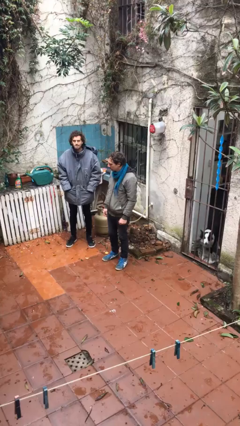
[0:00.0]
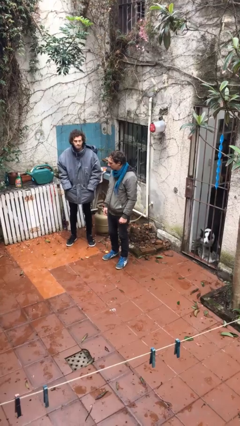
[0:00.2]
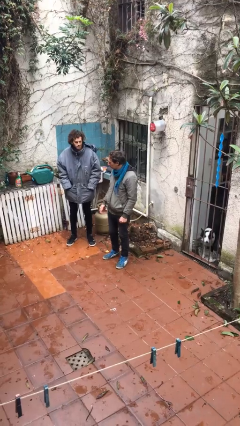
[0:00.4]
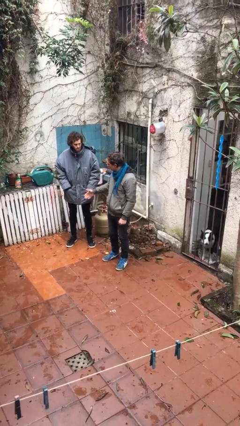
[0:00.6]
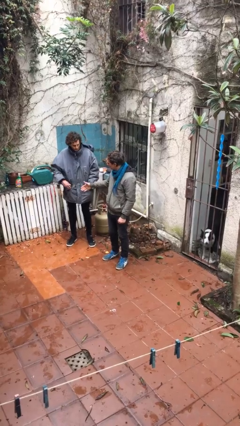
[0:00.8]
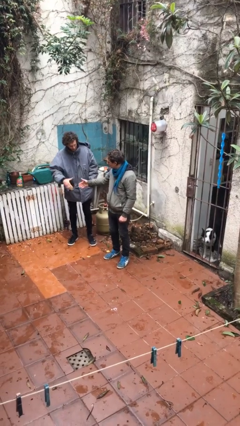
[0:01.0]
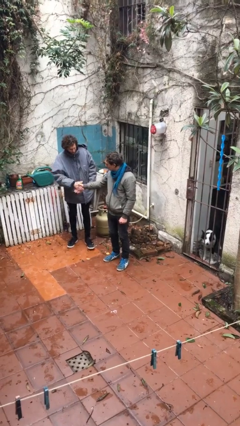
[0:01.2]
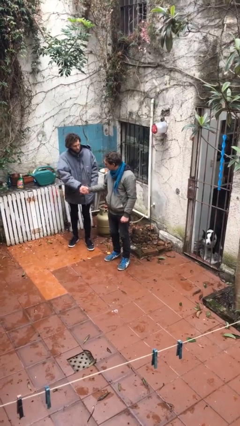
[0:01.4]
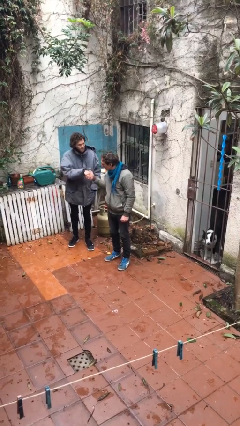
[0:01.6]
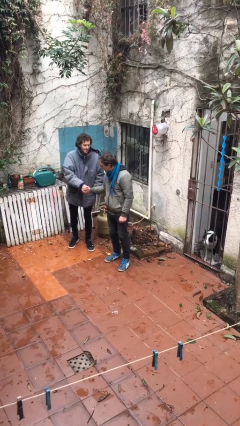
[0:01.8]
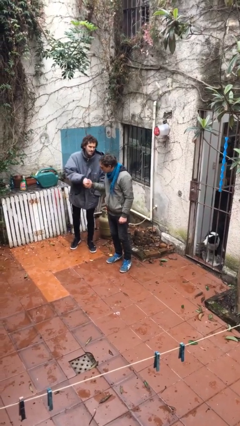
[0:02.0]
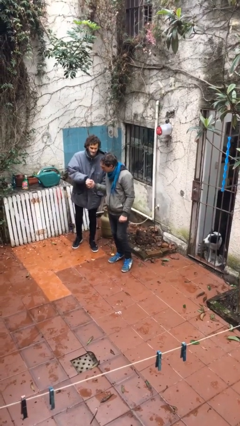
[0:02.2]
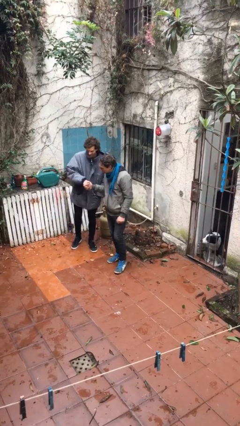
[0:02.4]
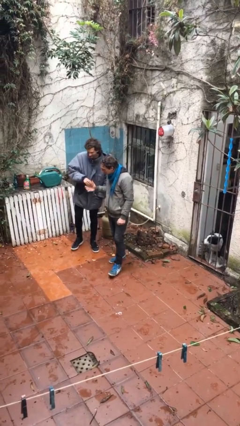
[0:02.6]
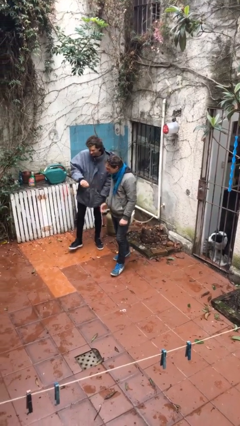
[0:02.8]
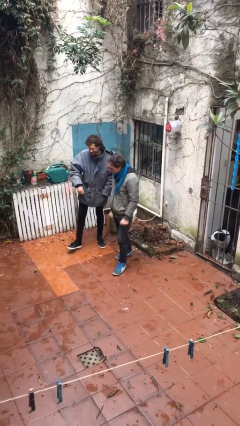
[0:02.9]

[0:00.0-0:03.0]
person shakes hand

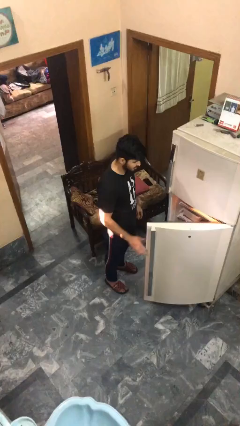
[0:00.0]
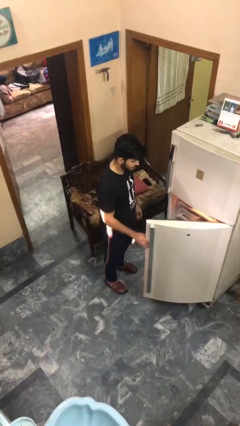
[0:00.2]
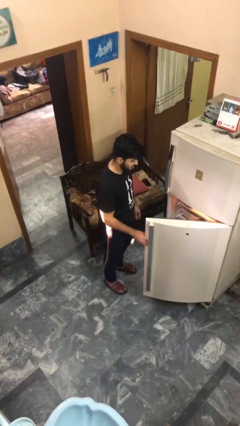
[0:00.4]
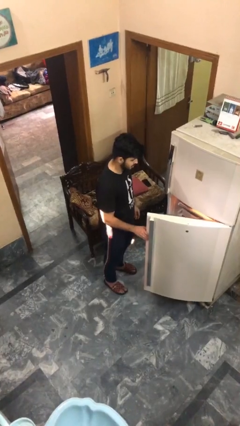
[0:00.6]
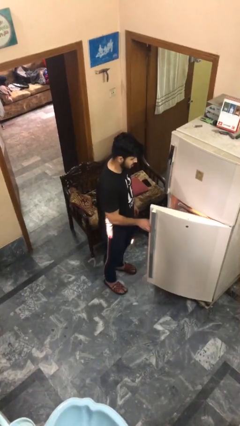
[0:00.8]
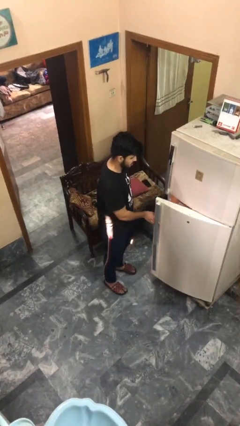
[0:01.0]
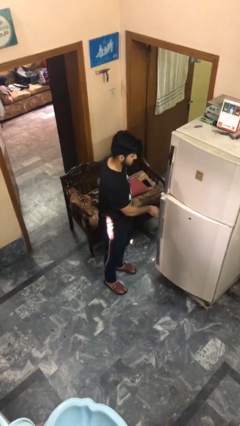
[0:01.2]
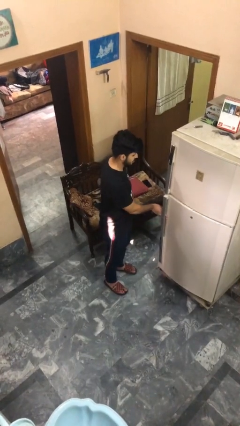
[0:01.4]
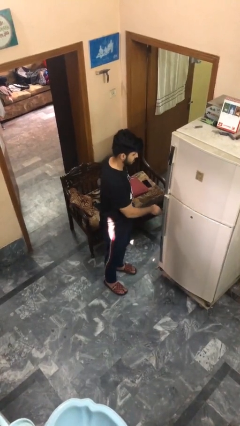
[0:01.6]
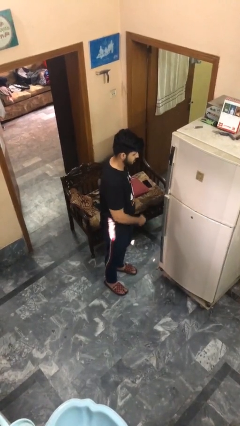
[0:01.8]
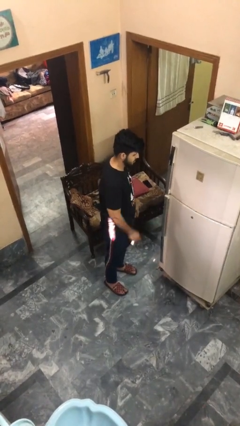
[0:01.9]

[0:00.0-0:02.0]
person closes refrigerator

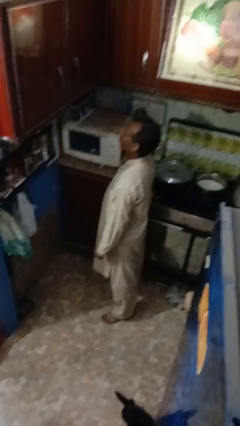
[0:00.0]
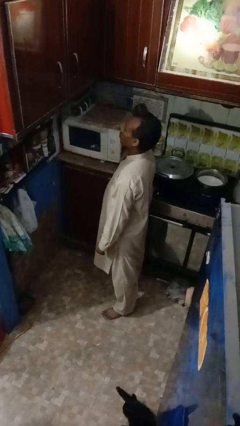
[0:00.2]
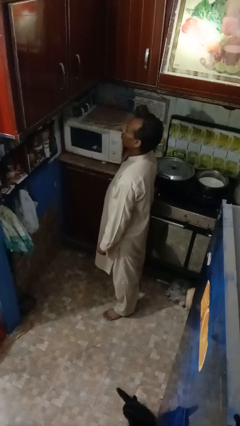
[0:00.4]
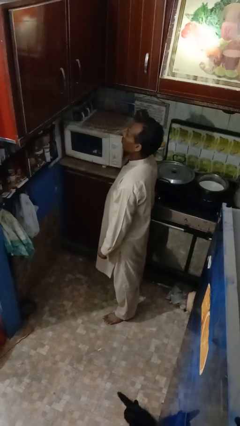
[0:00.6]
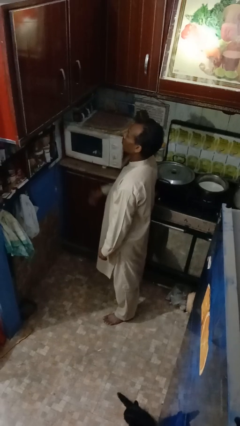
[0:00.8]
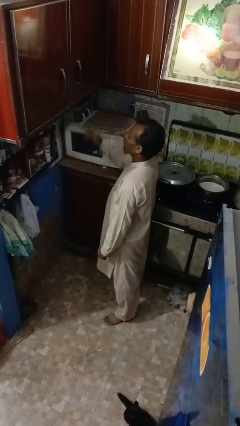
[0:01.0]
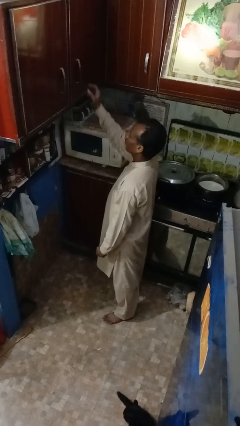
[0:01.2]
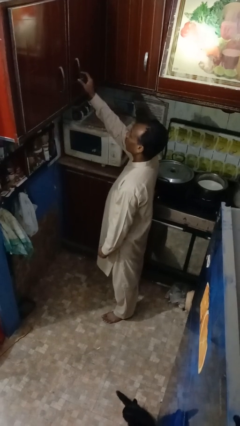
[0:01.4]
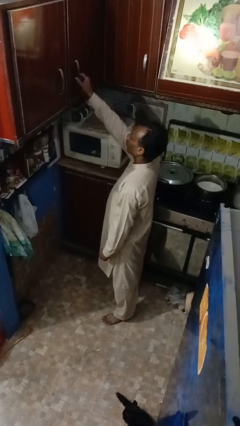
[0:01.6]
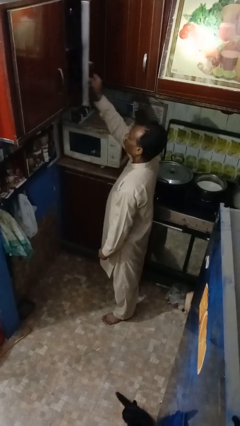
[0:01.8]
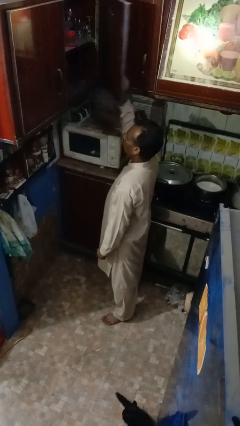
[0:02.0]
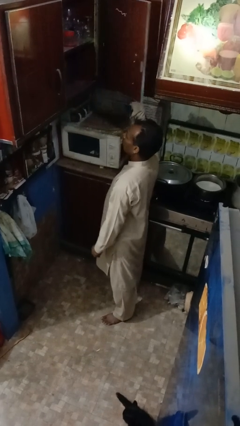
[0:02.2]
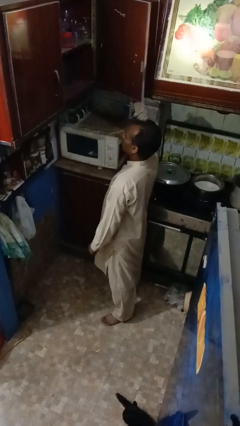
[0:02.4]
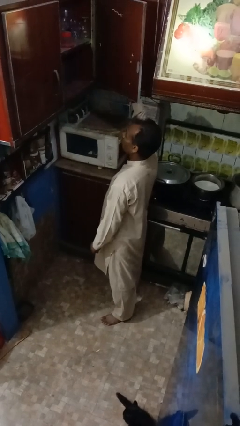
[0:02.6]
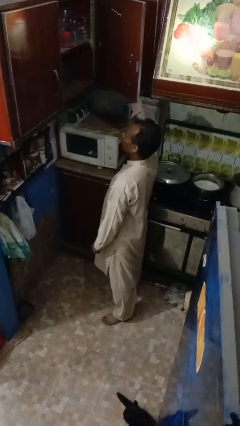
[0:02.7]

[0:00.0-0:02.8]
person opens cabinet

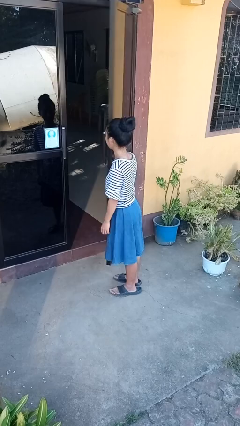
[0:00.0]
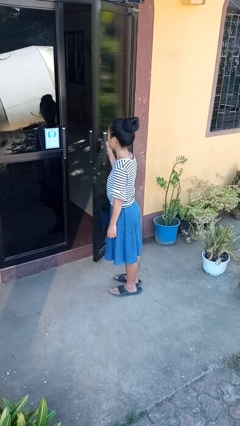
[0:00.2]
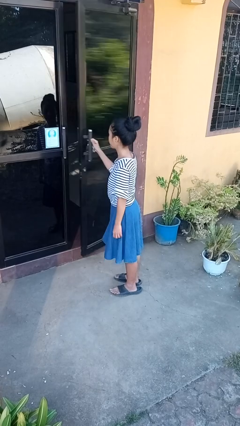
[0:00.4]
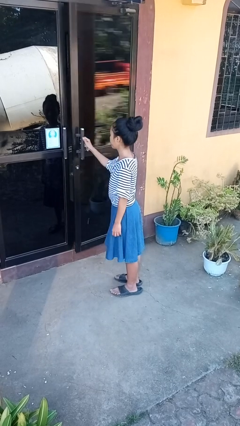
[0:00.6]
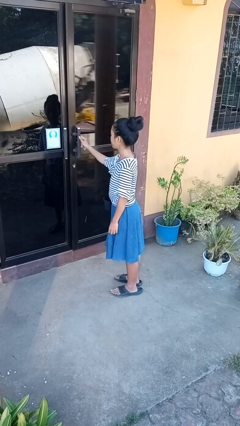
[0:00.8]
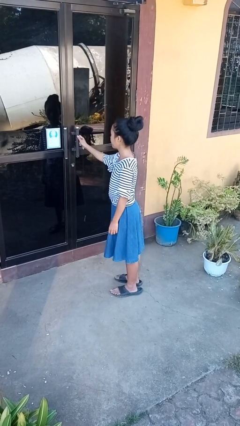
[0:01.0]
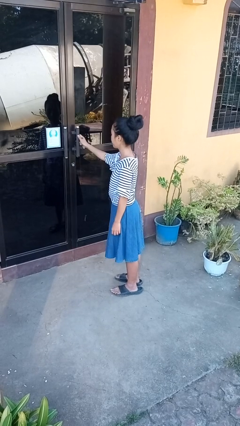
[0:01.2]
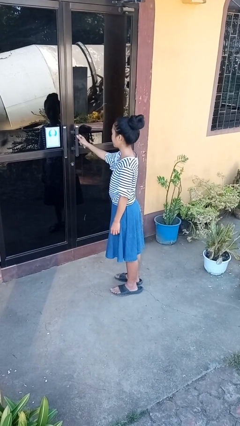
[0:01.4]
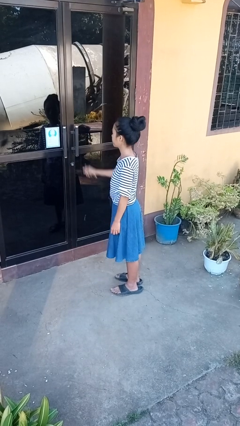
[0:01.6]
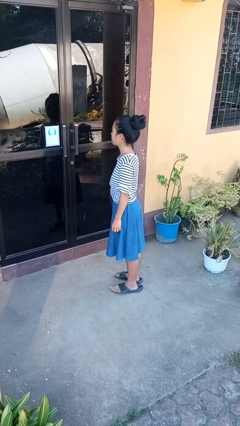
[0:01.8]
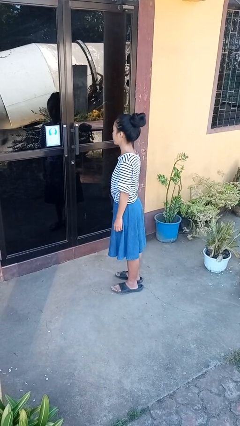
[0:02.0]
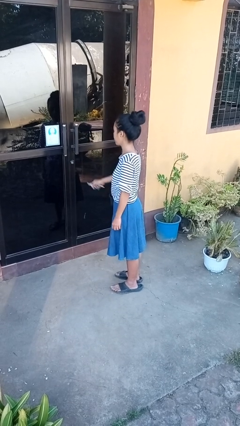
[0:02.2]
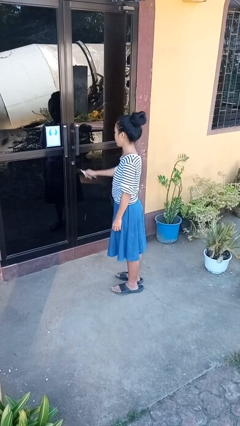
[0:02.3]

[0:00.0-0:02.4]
person closes facility door

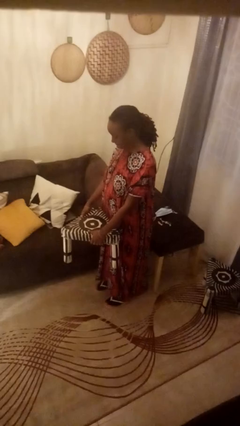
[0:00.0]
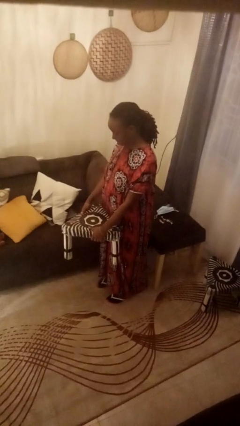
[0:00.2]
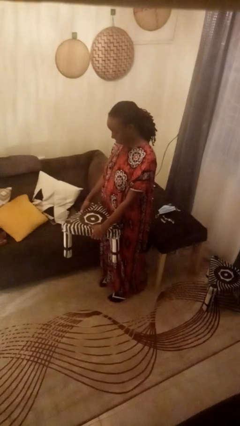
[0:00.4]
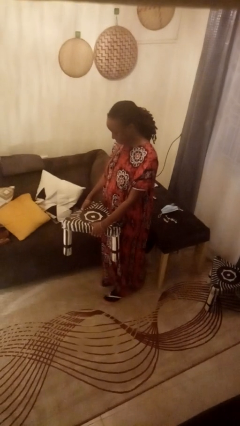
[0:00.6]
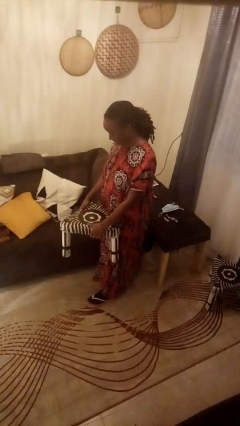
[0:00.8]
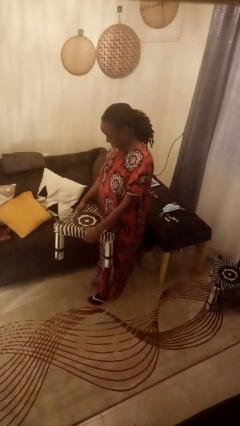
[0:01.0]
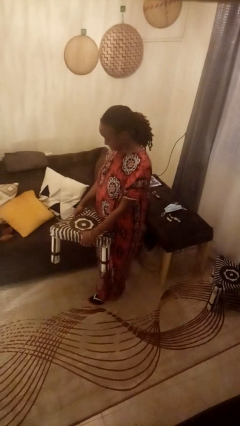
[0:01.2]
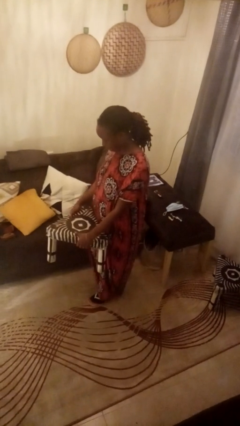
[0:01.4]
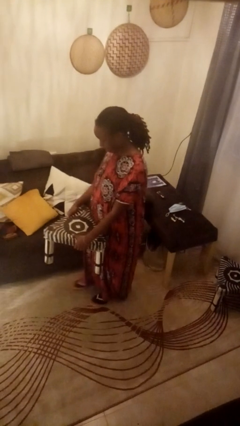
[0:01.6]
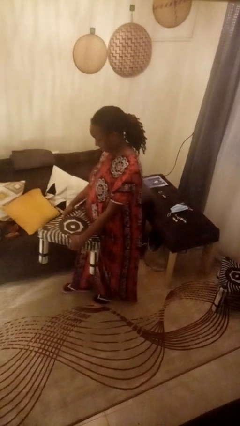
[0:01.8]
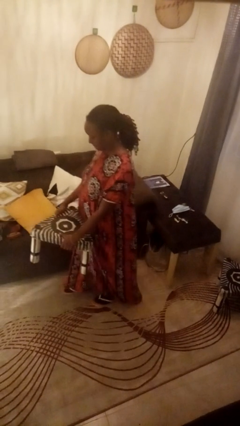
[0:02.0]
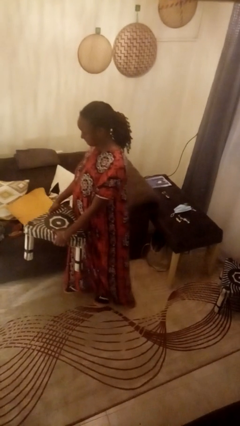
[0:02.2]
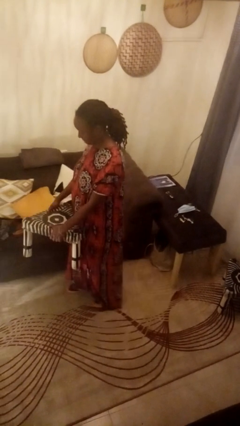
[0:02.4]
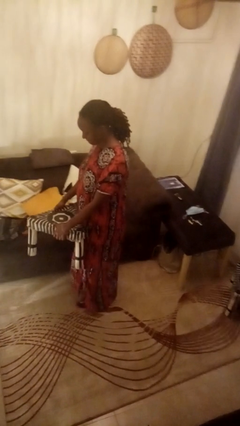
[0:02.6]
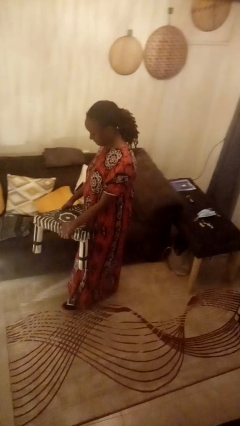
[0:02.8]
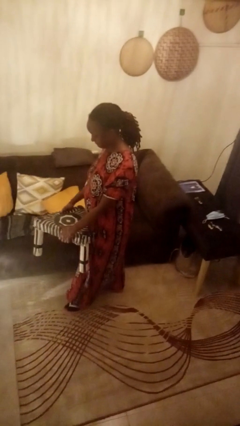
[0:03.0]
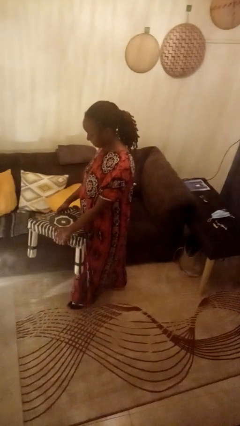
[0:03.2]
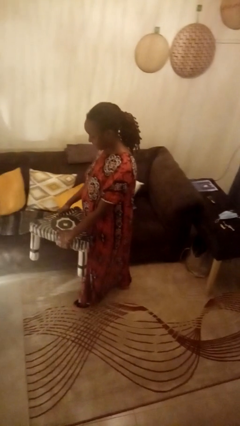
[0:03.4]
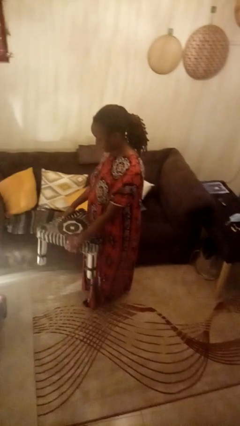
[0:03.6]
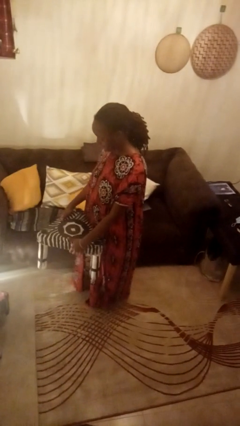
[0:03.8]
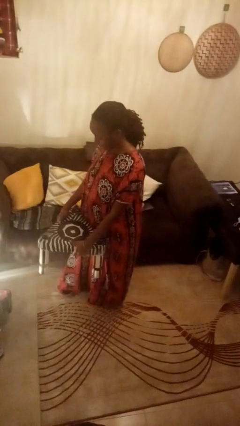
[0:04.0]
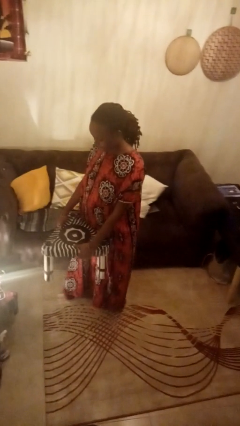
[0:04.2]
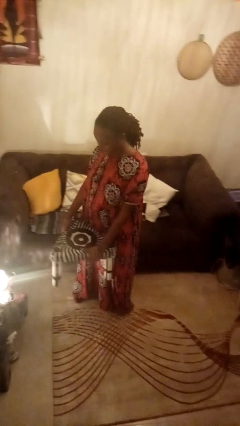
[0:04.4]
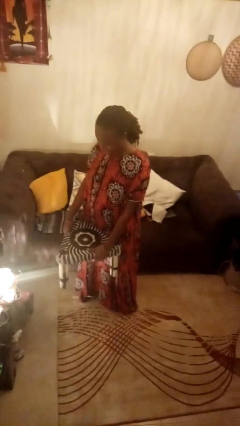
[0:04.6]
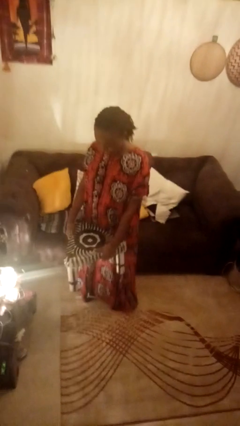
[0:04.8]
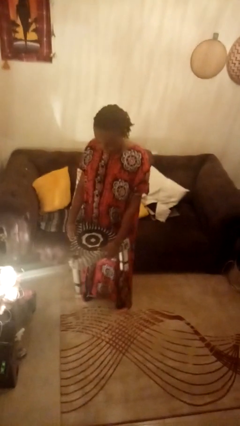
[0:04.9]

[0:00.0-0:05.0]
person carries furniture

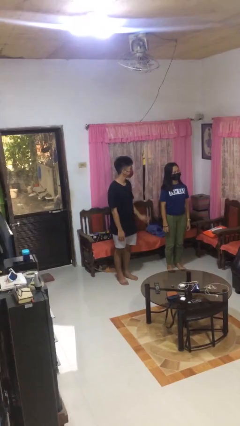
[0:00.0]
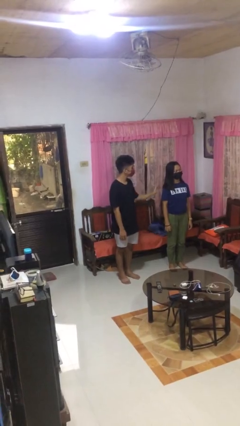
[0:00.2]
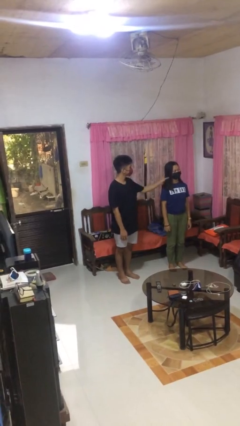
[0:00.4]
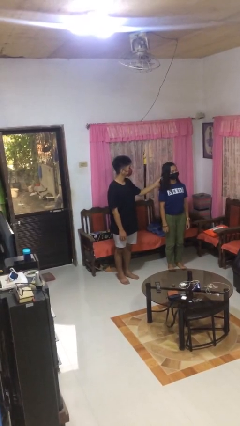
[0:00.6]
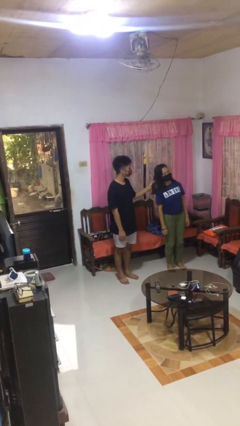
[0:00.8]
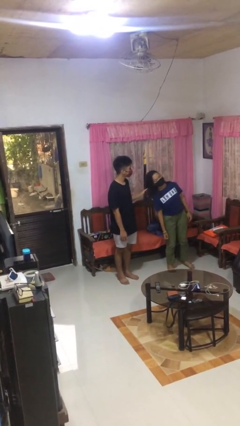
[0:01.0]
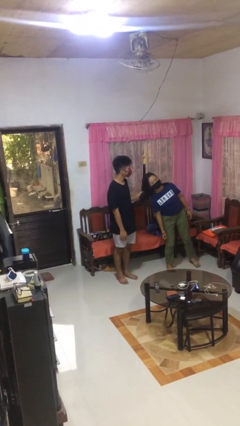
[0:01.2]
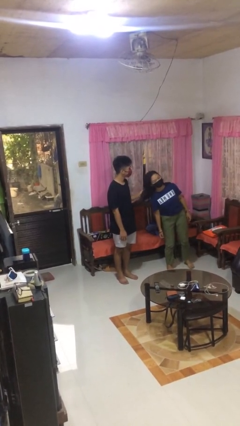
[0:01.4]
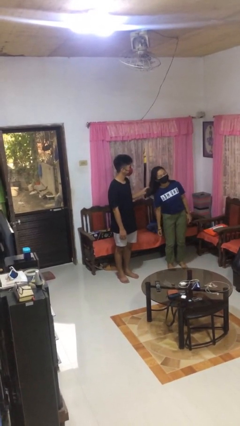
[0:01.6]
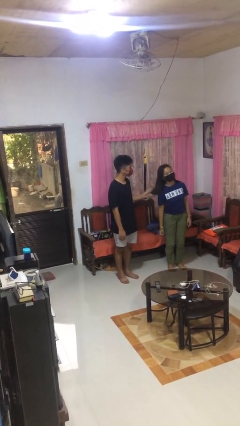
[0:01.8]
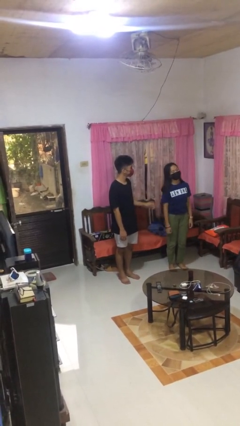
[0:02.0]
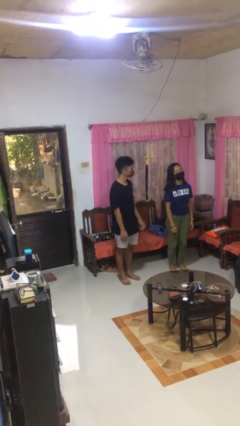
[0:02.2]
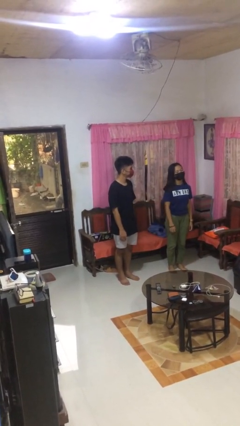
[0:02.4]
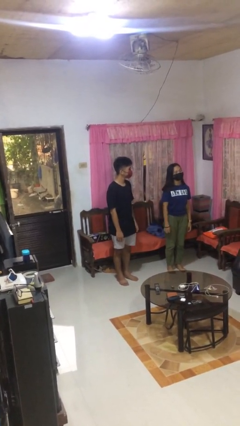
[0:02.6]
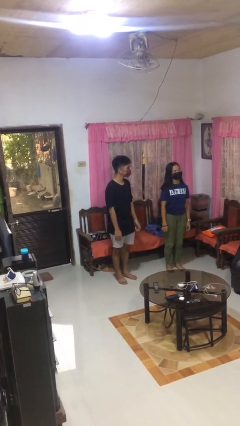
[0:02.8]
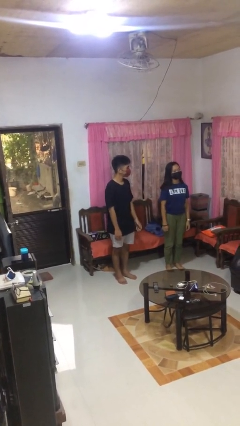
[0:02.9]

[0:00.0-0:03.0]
person grabs person by hair
